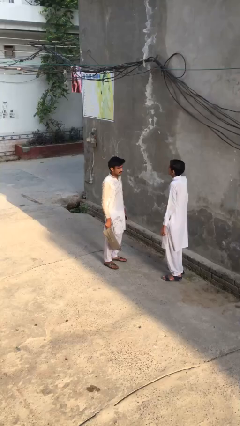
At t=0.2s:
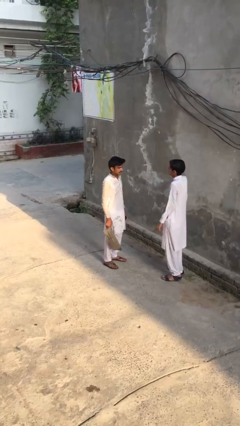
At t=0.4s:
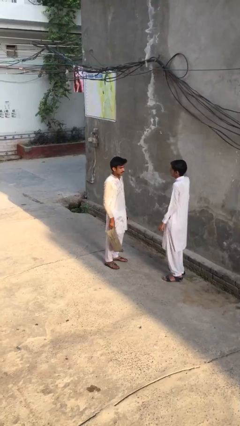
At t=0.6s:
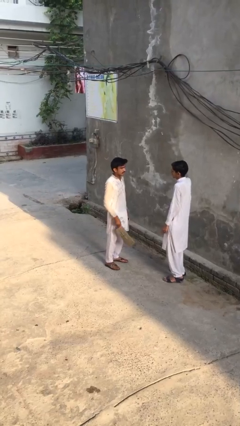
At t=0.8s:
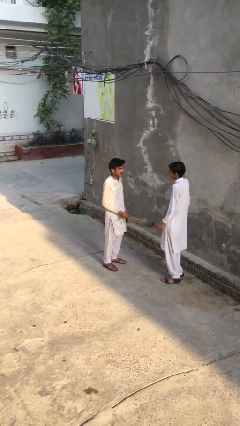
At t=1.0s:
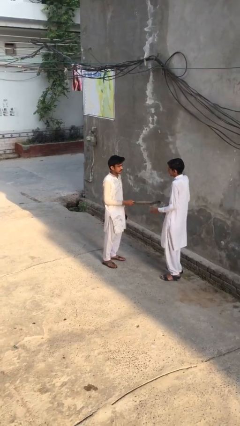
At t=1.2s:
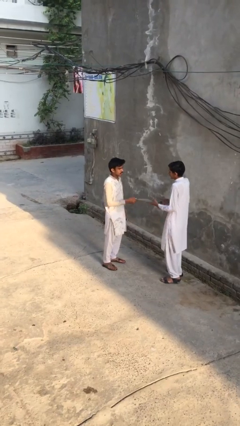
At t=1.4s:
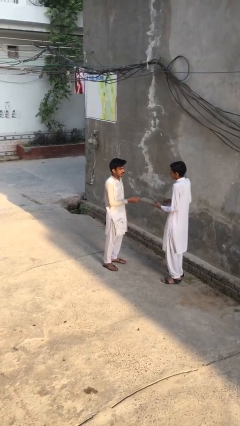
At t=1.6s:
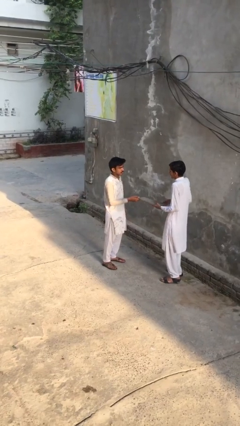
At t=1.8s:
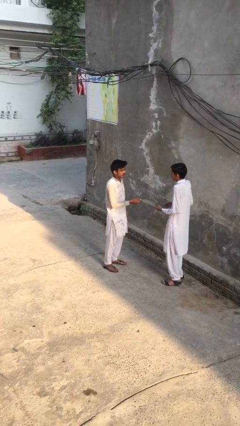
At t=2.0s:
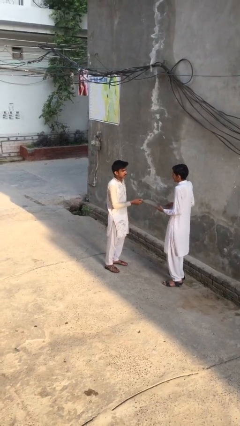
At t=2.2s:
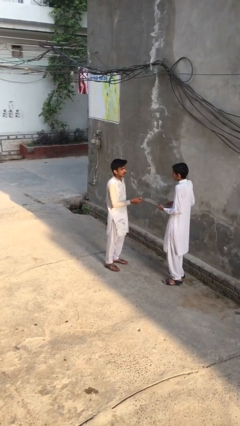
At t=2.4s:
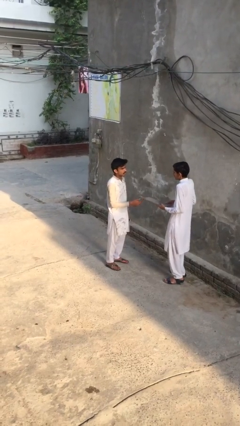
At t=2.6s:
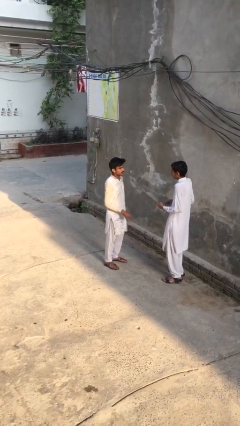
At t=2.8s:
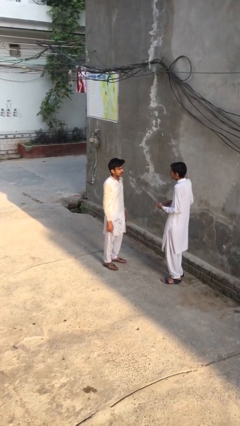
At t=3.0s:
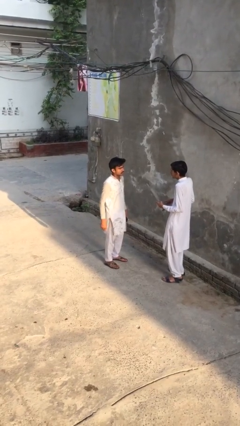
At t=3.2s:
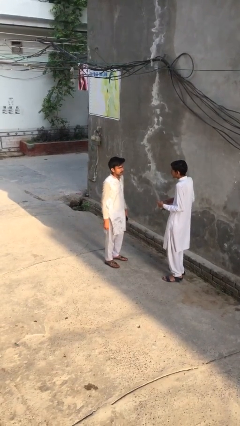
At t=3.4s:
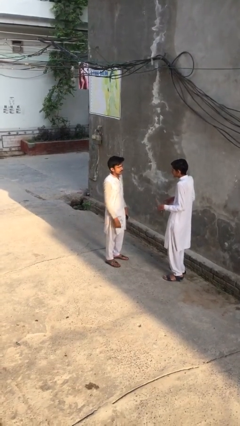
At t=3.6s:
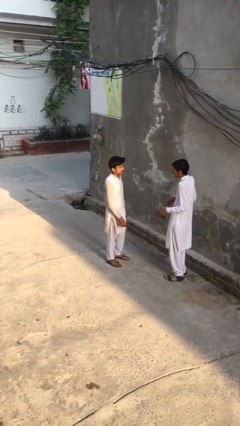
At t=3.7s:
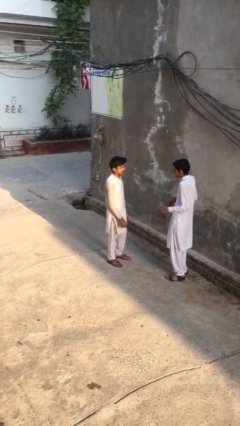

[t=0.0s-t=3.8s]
person transfers object to person

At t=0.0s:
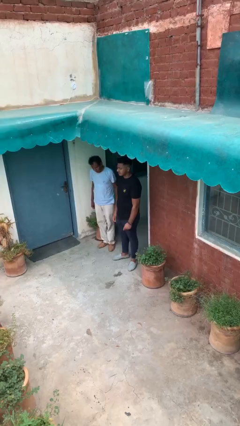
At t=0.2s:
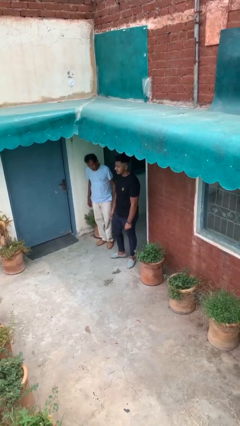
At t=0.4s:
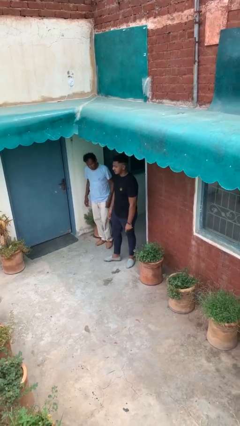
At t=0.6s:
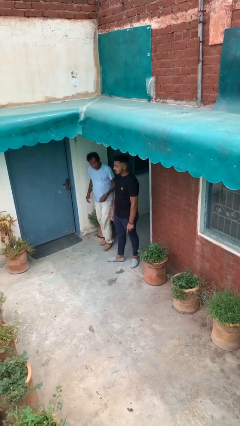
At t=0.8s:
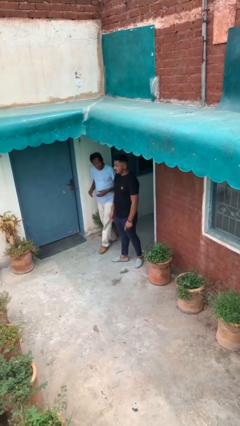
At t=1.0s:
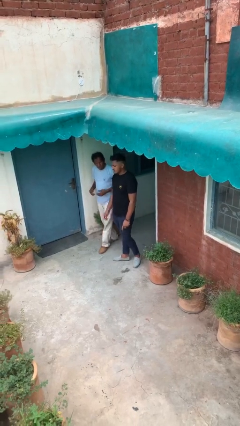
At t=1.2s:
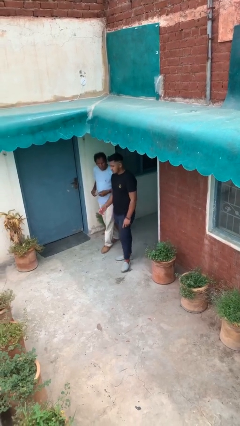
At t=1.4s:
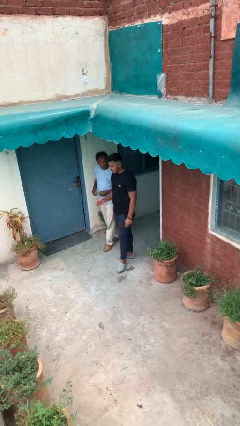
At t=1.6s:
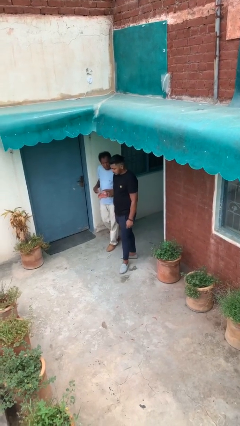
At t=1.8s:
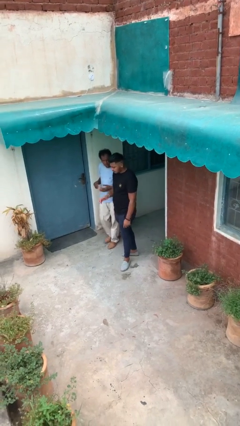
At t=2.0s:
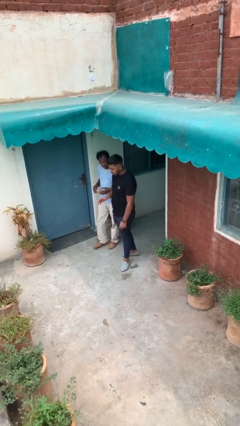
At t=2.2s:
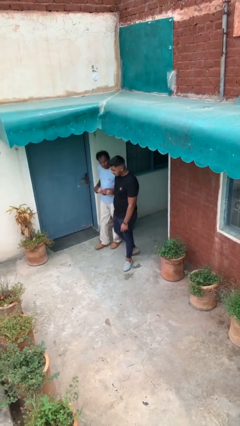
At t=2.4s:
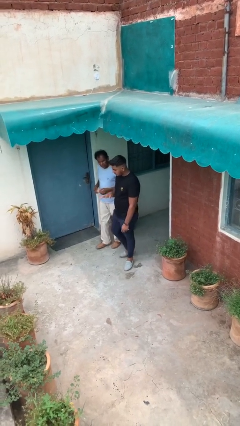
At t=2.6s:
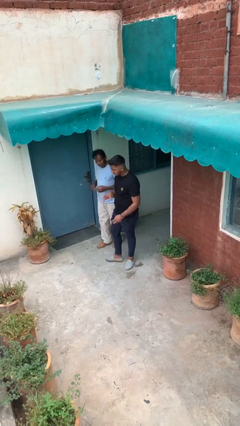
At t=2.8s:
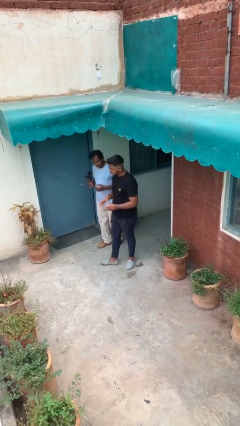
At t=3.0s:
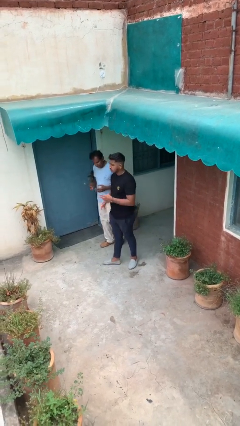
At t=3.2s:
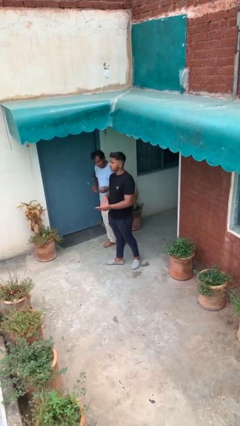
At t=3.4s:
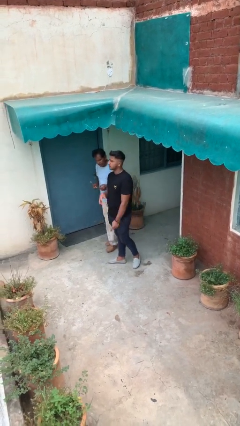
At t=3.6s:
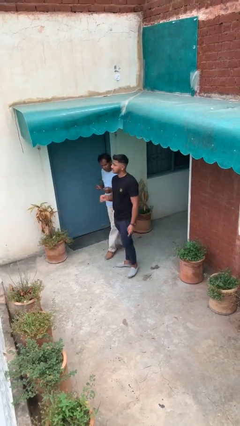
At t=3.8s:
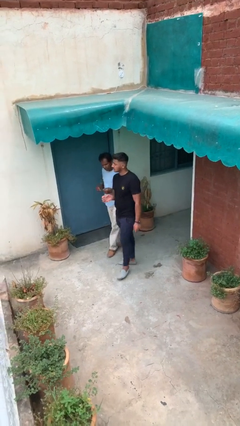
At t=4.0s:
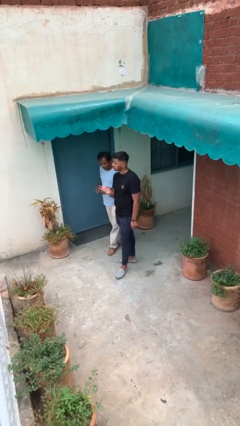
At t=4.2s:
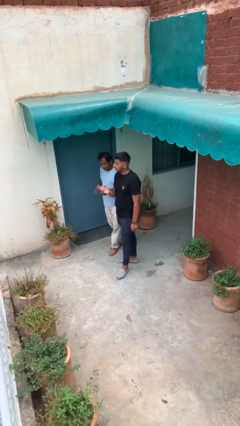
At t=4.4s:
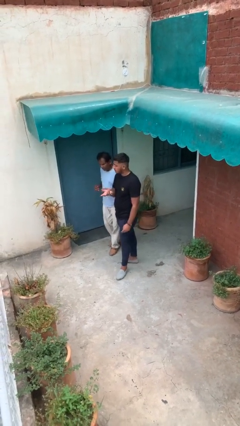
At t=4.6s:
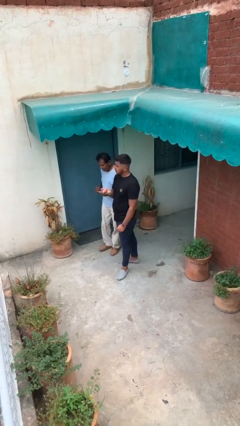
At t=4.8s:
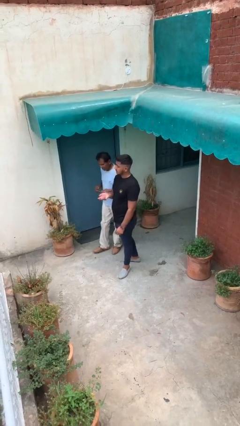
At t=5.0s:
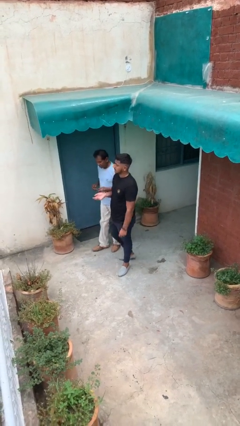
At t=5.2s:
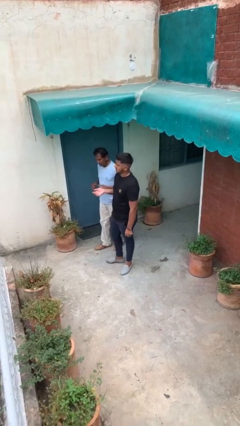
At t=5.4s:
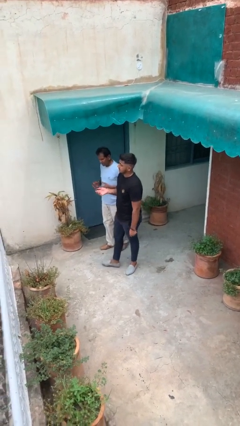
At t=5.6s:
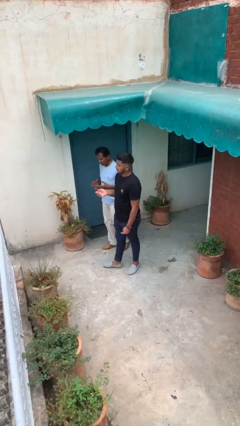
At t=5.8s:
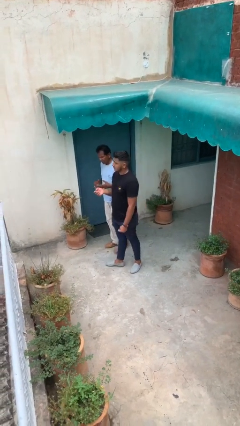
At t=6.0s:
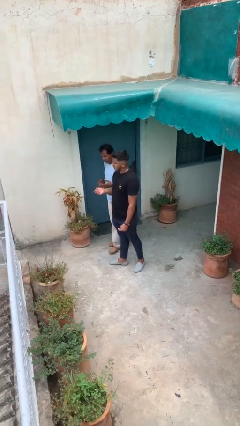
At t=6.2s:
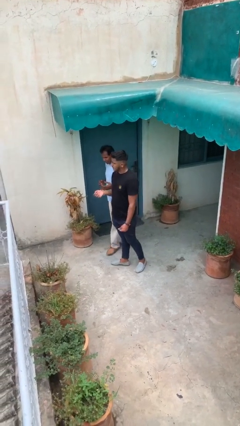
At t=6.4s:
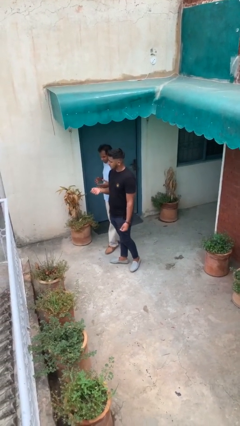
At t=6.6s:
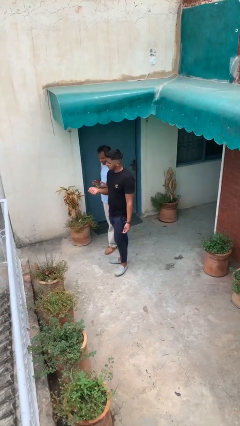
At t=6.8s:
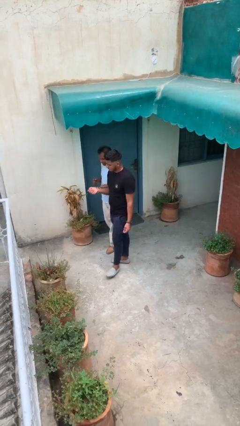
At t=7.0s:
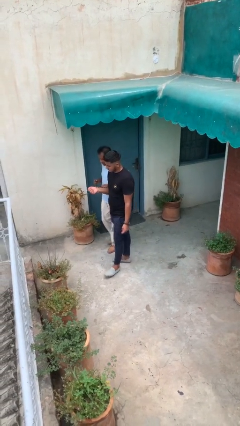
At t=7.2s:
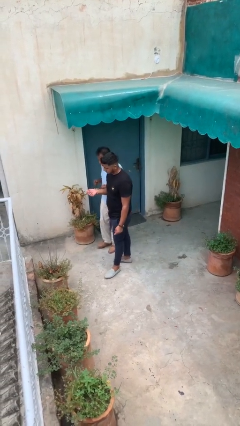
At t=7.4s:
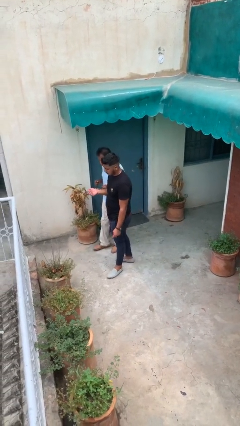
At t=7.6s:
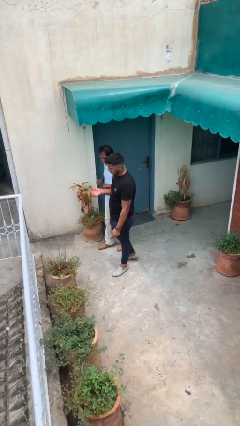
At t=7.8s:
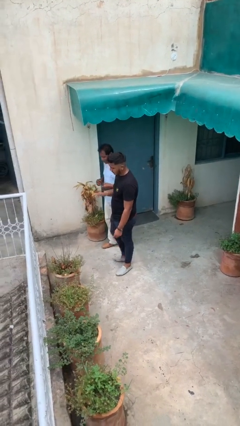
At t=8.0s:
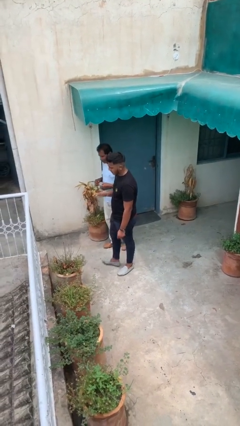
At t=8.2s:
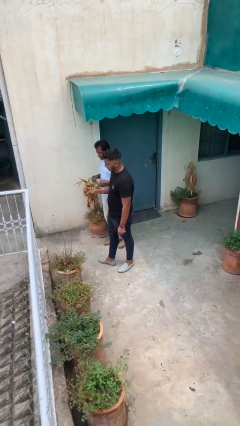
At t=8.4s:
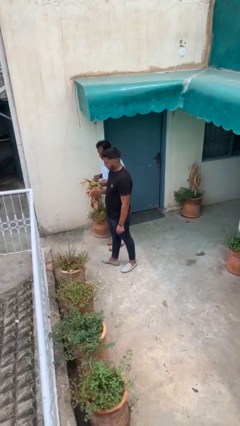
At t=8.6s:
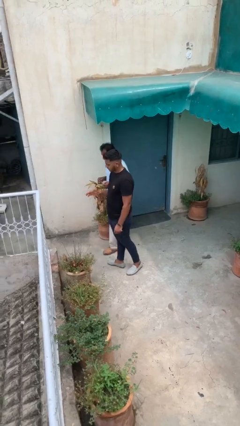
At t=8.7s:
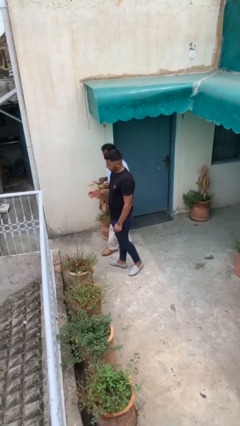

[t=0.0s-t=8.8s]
person talks to person

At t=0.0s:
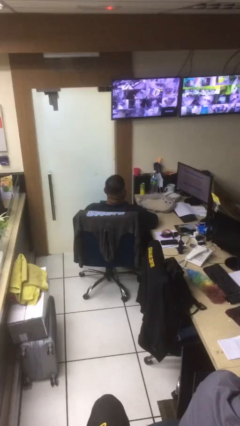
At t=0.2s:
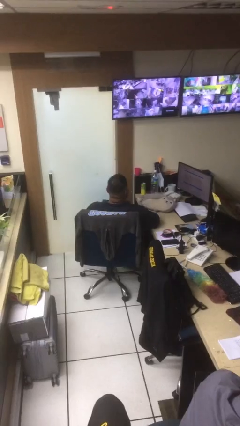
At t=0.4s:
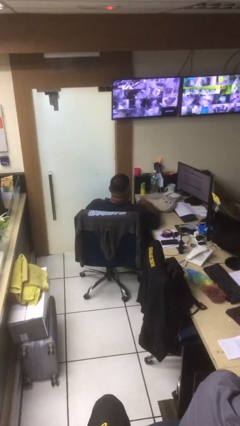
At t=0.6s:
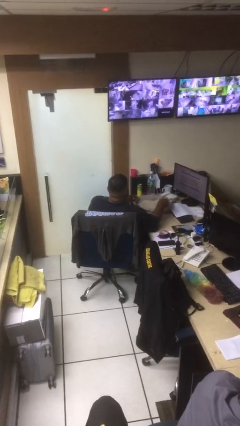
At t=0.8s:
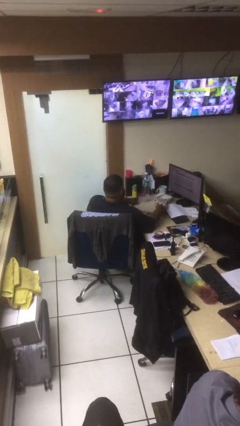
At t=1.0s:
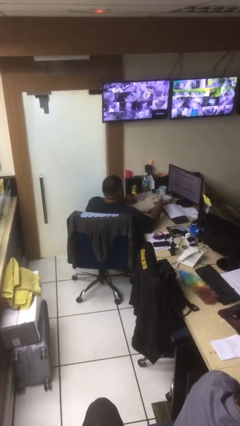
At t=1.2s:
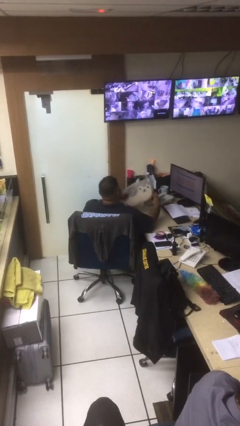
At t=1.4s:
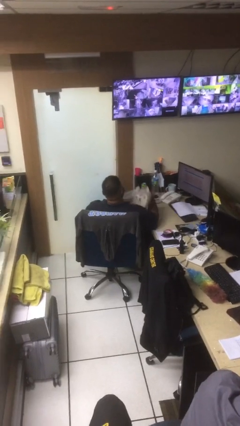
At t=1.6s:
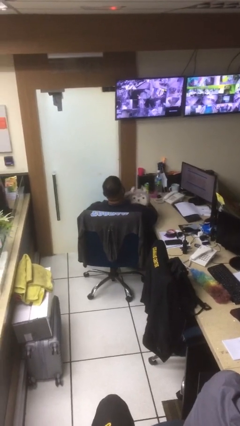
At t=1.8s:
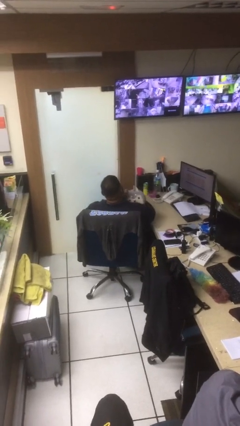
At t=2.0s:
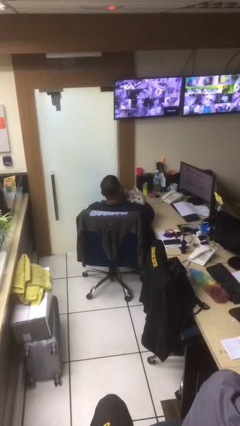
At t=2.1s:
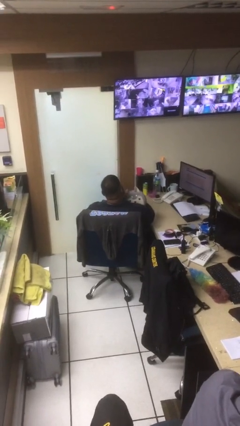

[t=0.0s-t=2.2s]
person hugs stuffed animal

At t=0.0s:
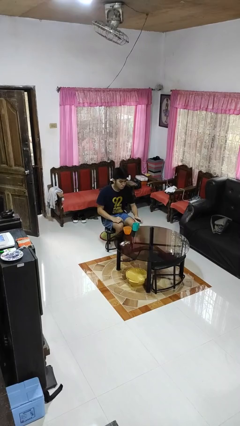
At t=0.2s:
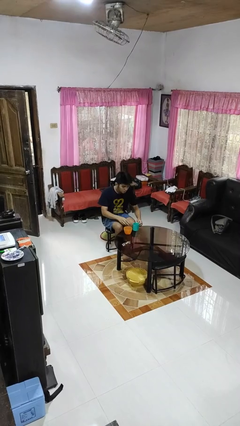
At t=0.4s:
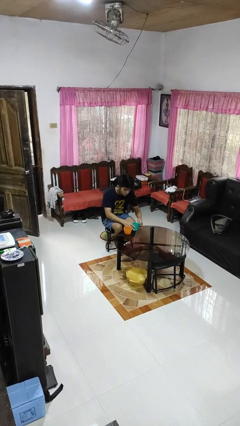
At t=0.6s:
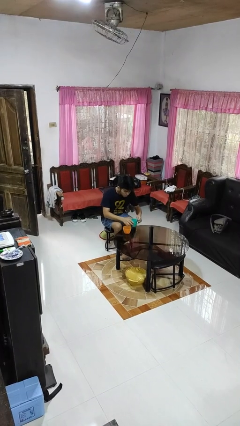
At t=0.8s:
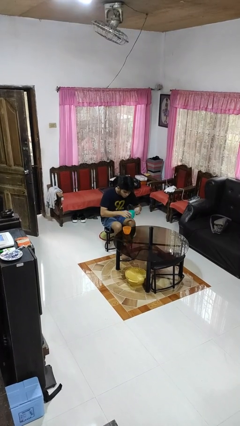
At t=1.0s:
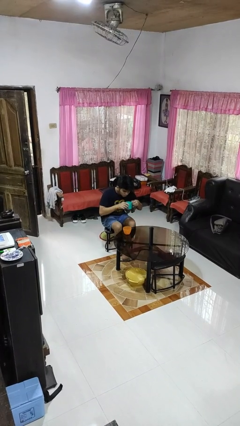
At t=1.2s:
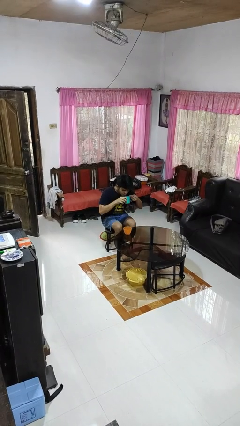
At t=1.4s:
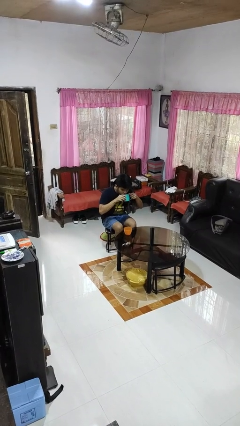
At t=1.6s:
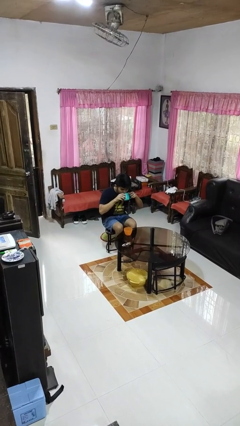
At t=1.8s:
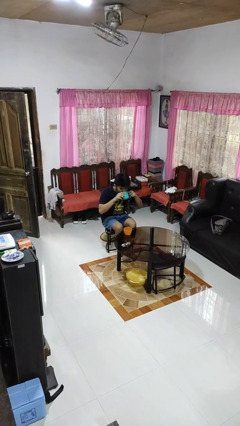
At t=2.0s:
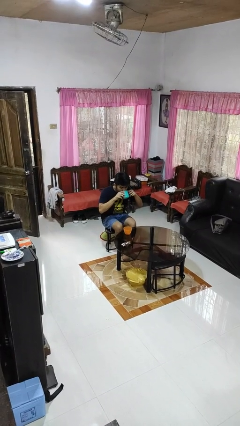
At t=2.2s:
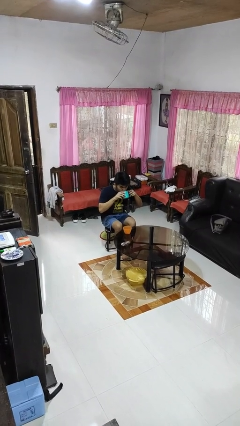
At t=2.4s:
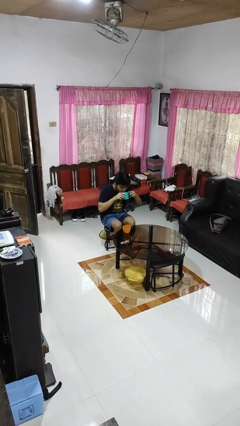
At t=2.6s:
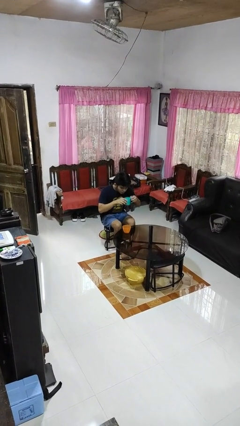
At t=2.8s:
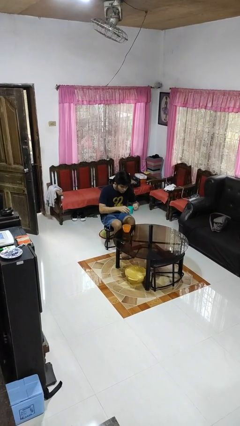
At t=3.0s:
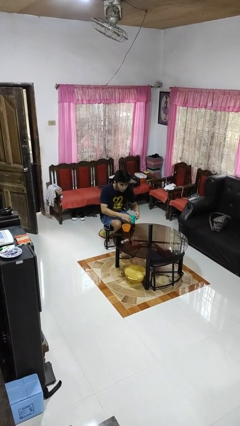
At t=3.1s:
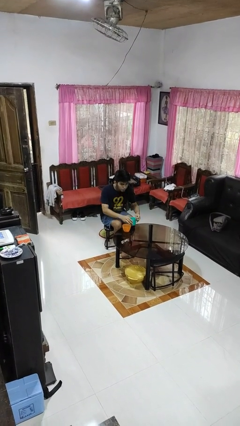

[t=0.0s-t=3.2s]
person drinks from cup
